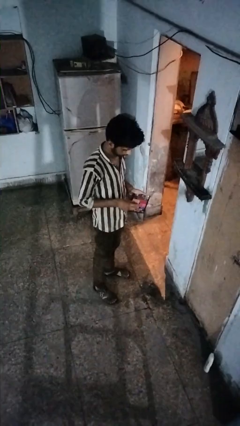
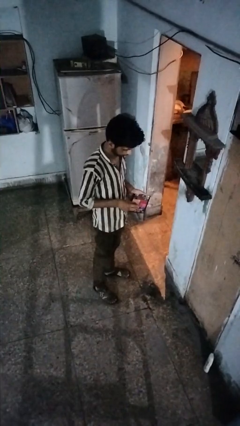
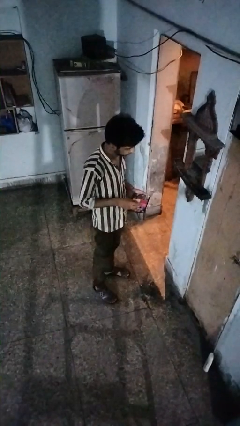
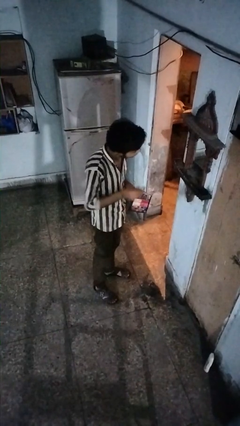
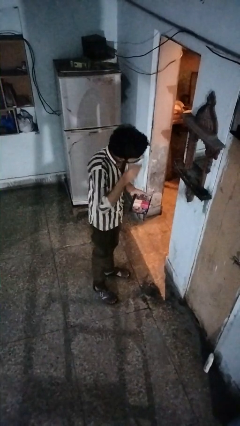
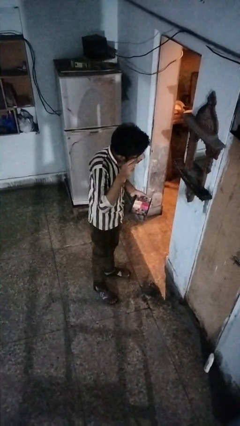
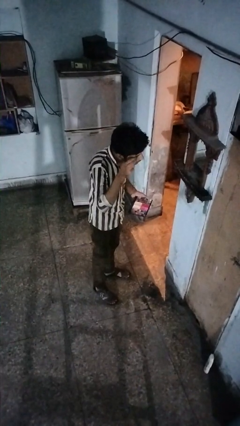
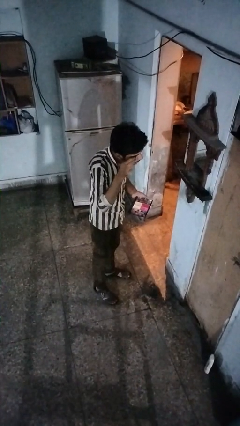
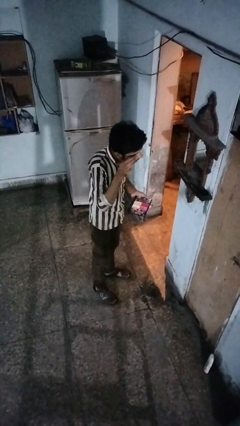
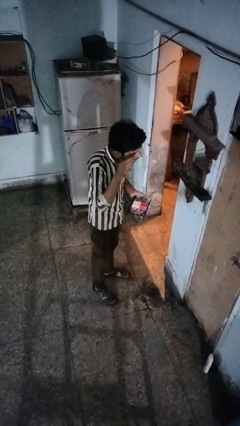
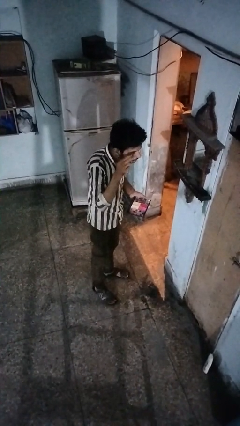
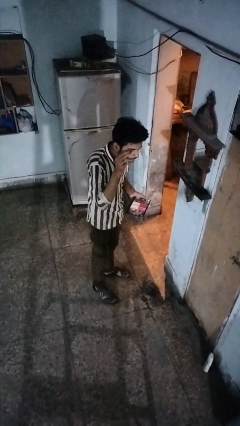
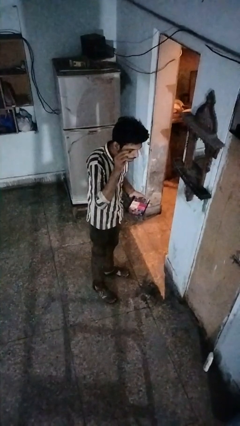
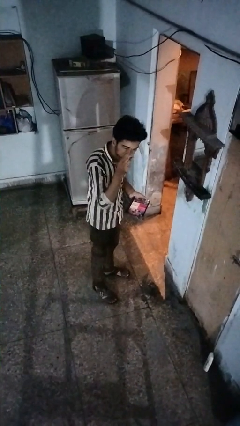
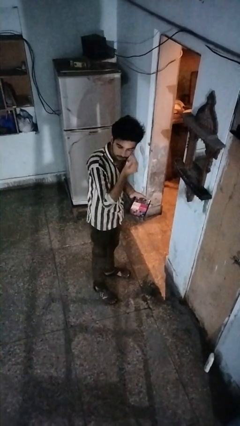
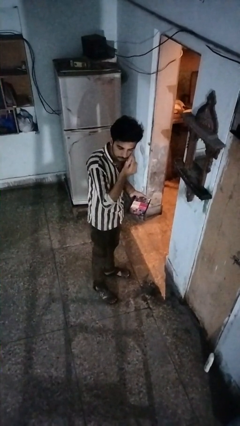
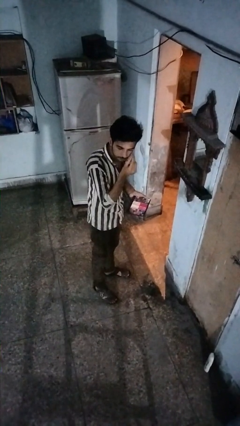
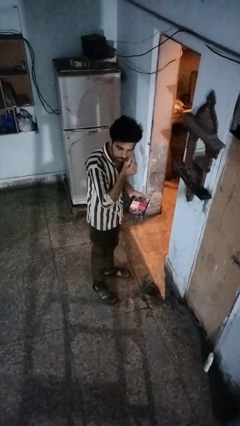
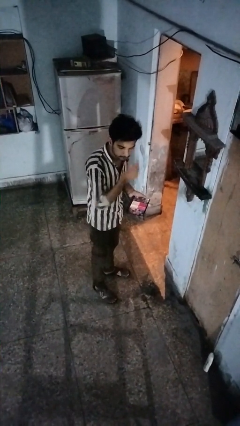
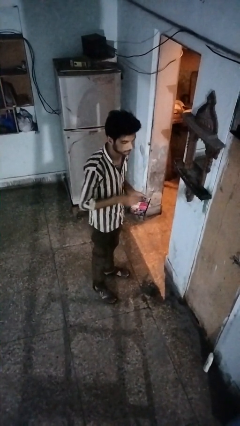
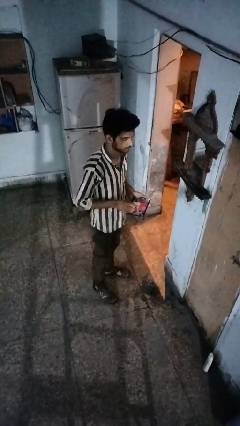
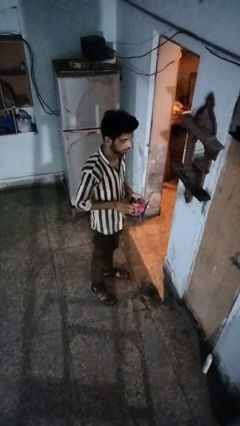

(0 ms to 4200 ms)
person applies eye makeup

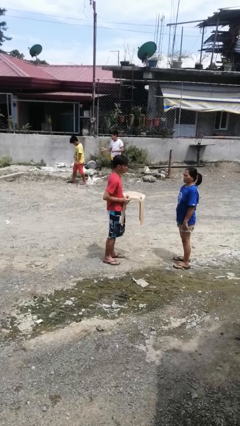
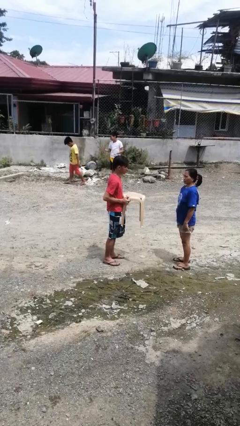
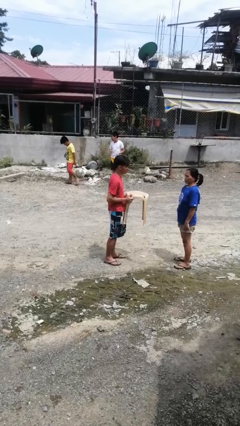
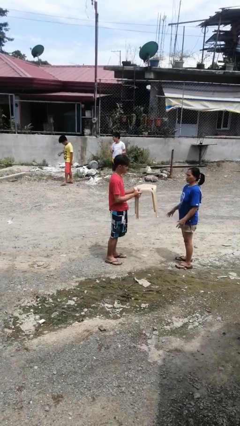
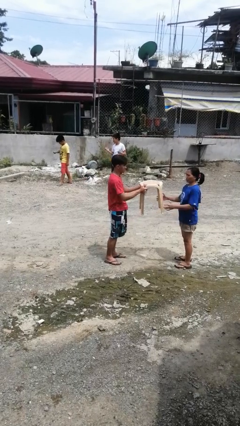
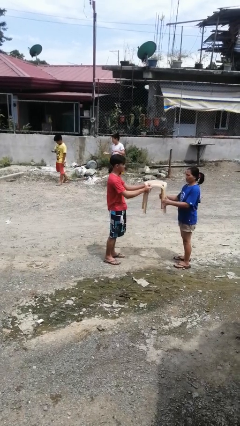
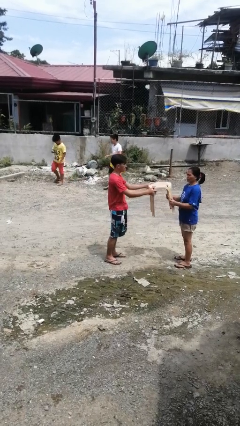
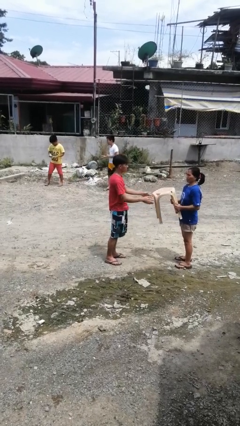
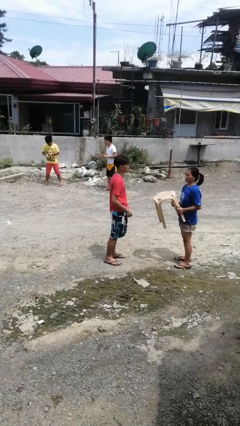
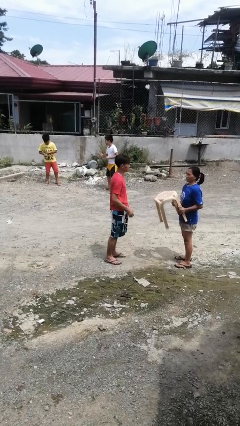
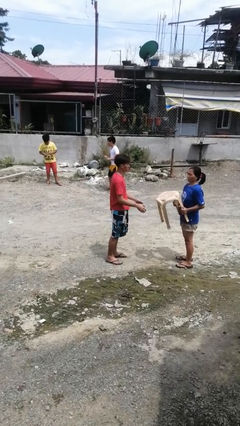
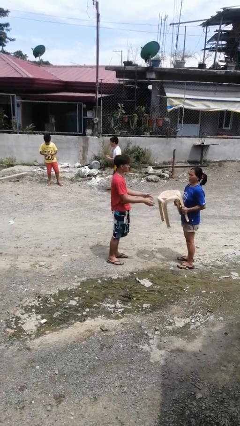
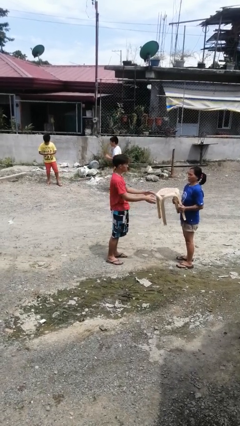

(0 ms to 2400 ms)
person transfers object to person

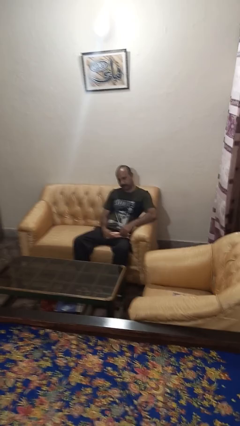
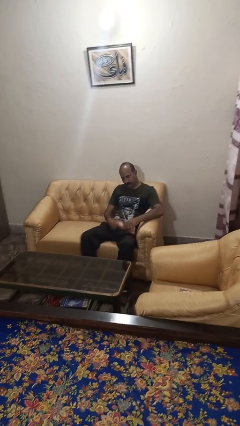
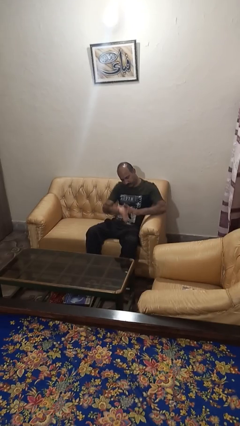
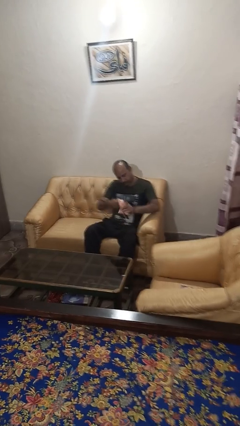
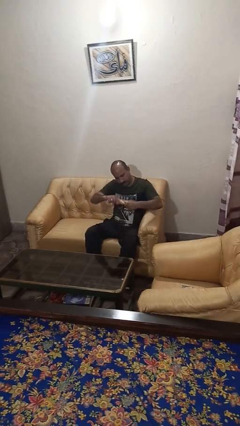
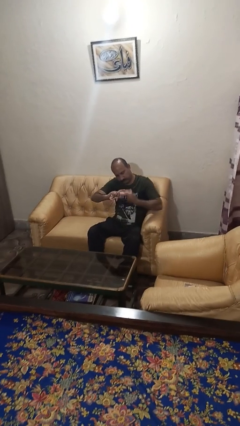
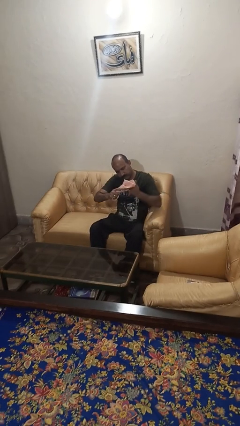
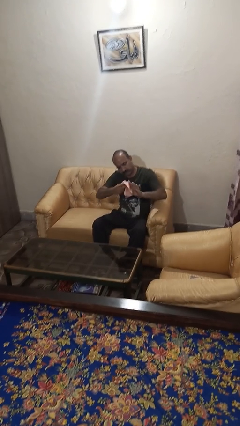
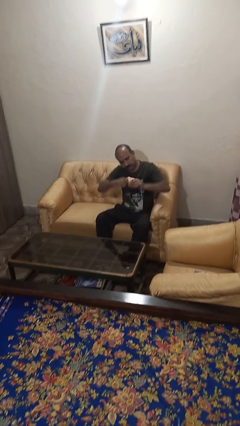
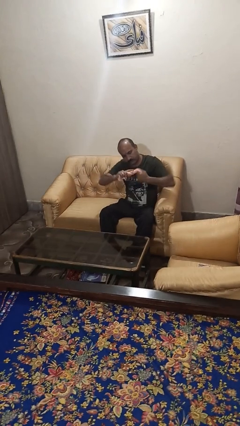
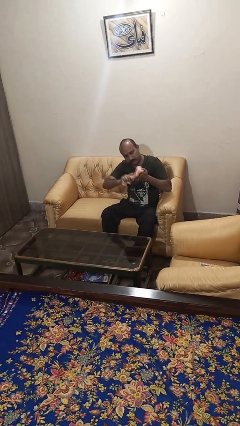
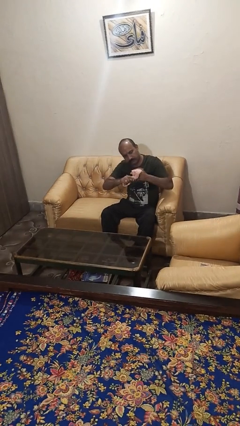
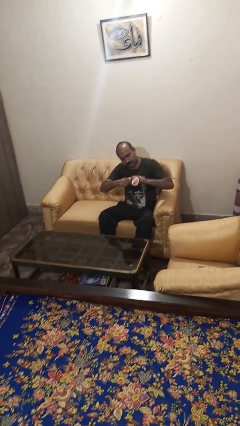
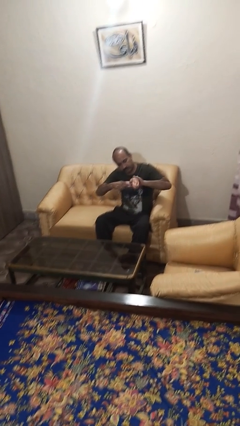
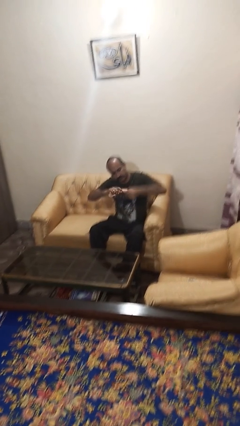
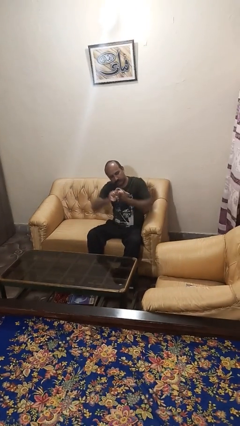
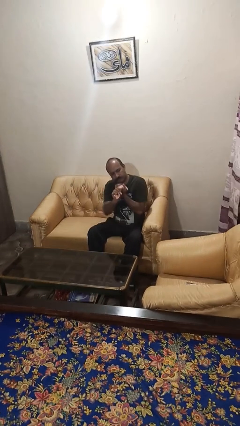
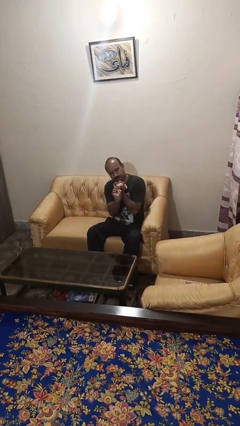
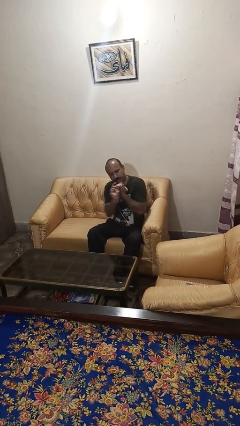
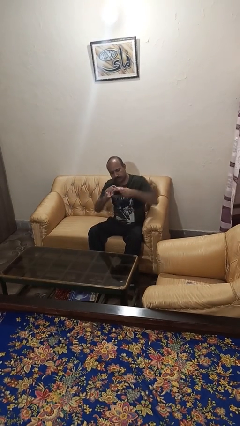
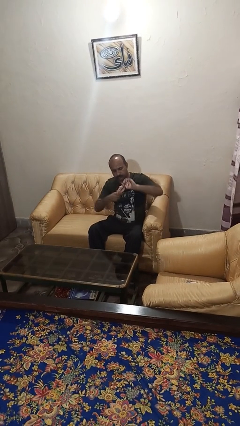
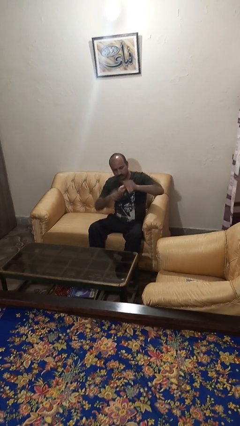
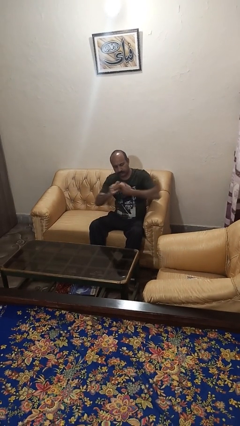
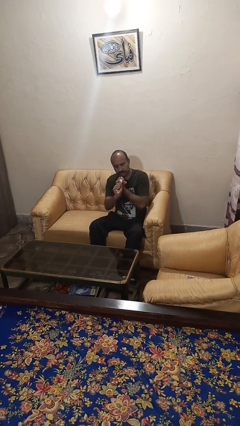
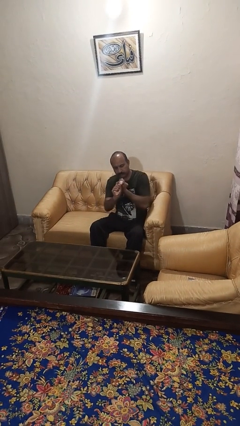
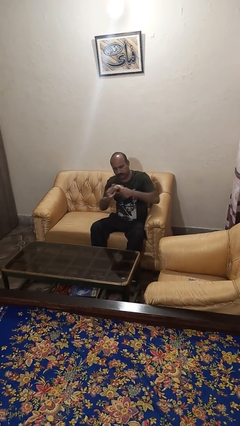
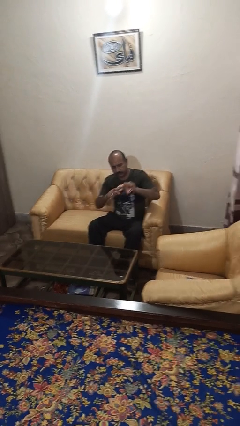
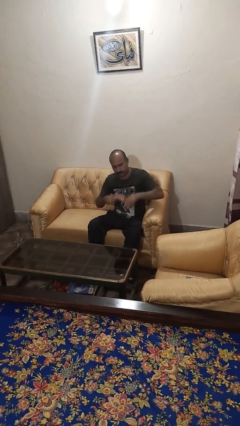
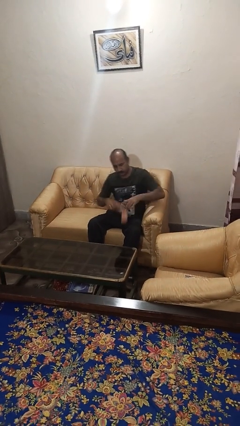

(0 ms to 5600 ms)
person squeezes object

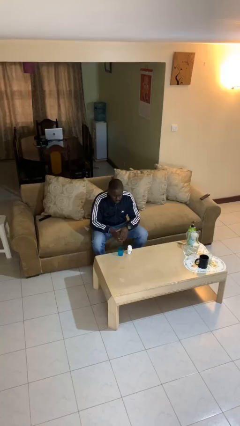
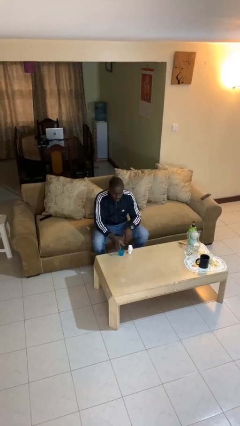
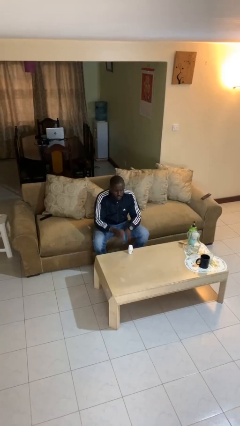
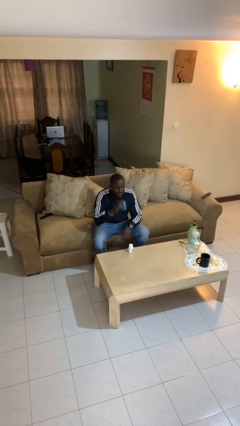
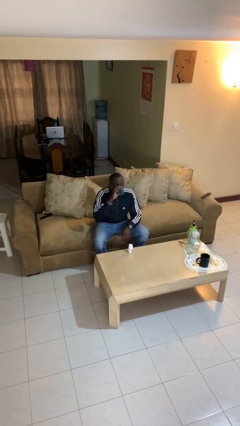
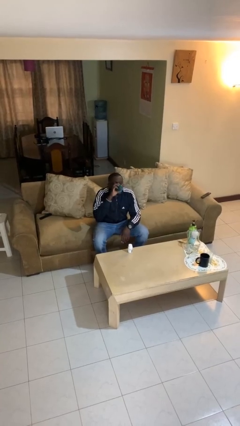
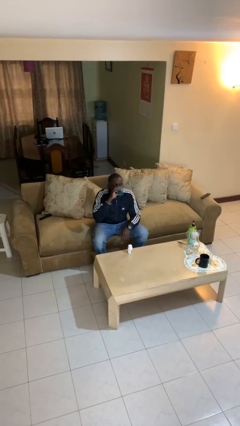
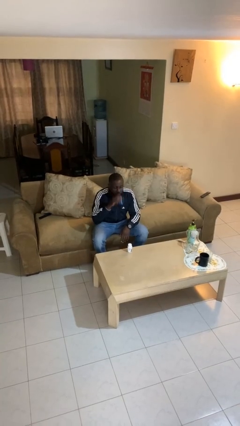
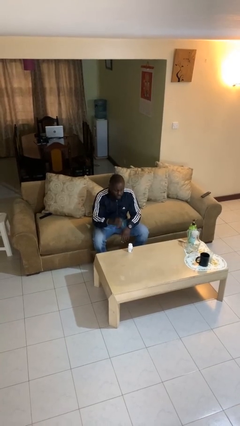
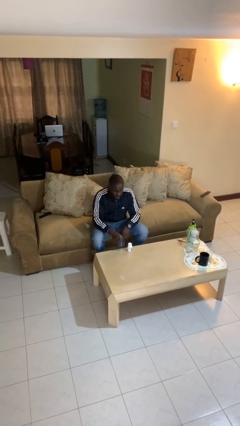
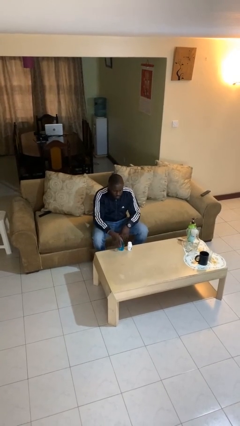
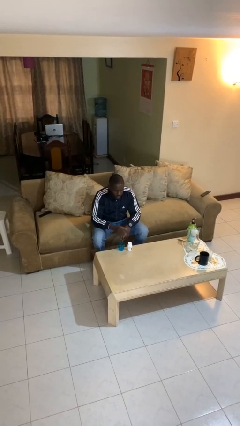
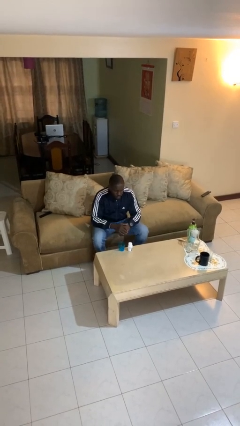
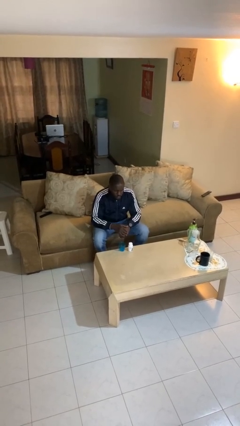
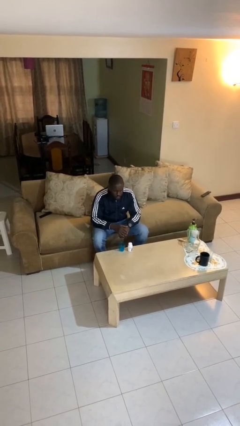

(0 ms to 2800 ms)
person drinks from cup

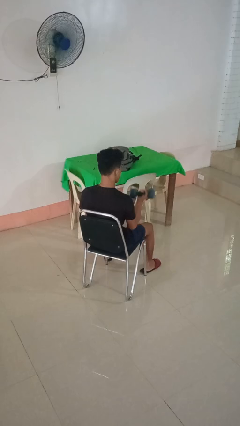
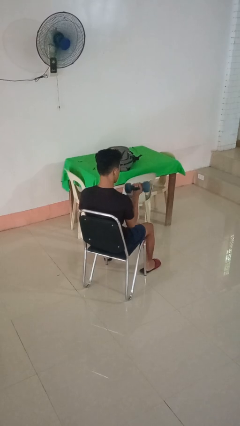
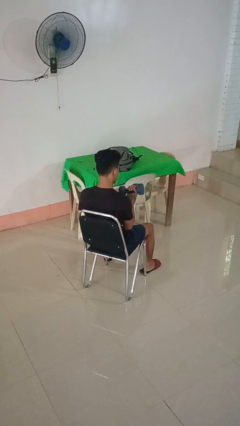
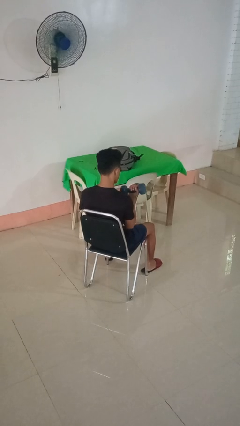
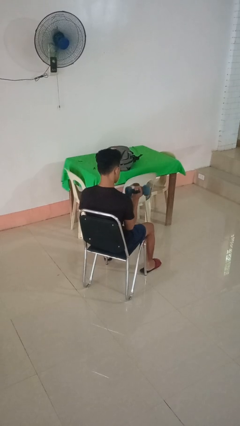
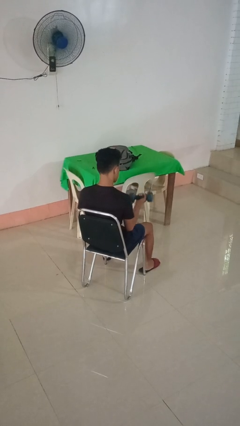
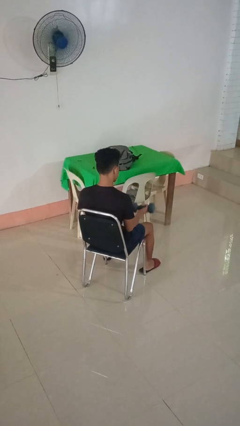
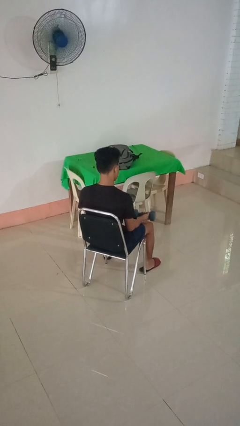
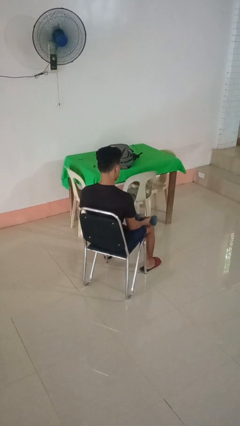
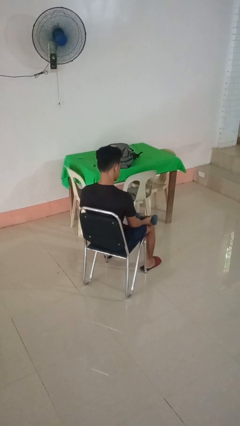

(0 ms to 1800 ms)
person lifts dumbbells

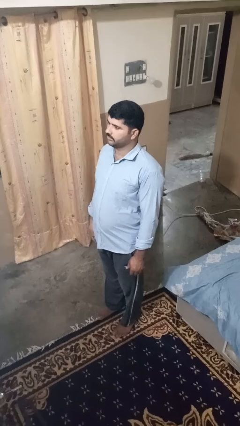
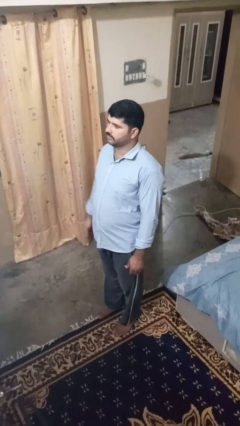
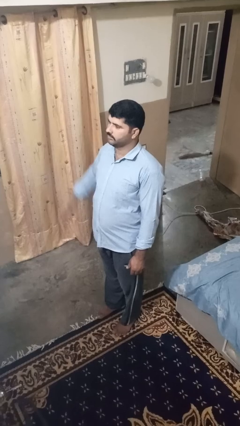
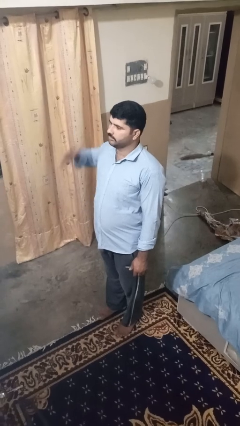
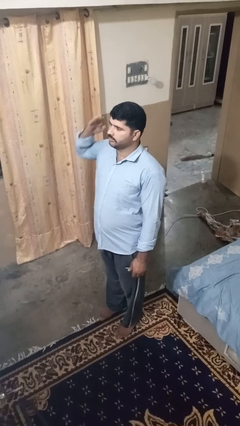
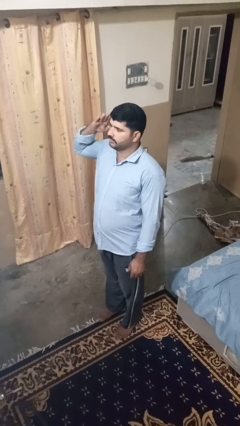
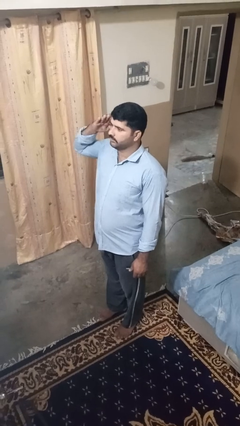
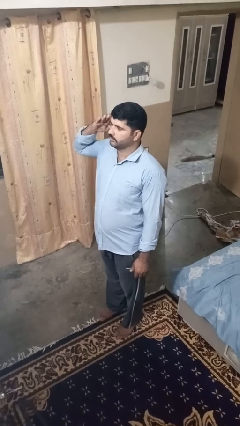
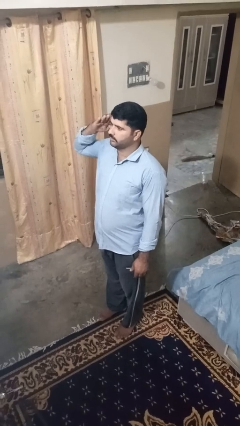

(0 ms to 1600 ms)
person salutes
